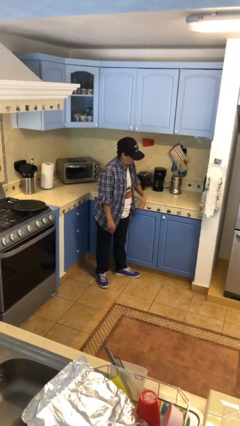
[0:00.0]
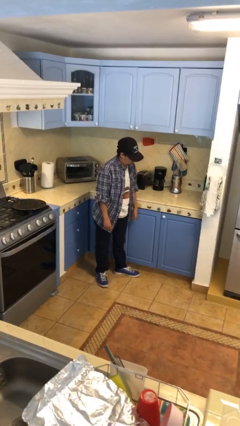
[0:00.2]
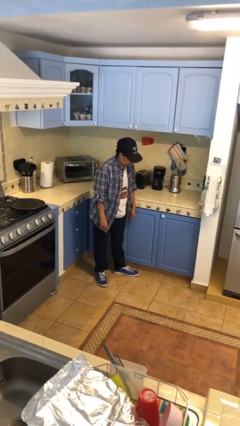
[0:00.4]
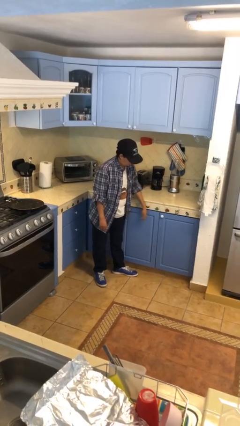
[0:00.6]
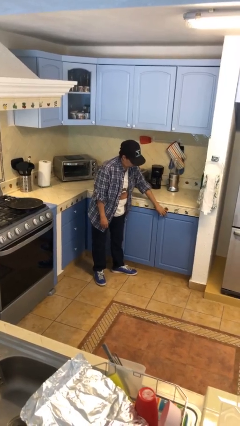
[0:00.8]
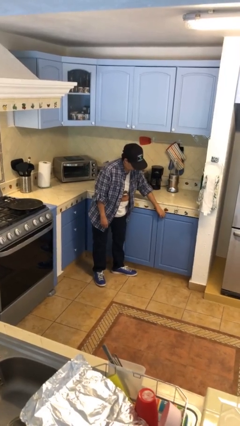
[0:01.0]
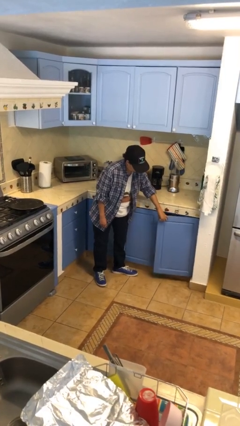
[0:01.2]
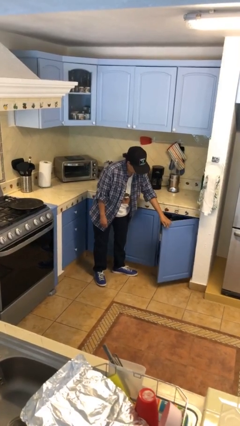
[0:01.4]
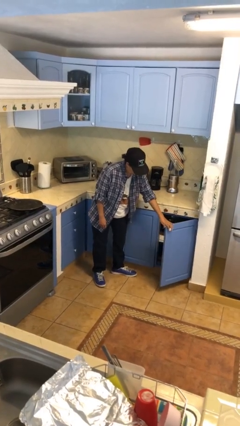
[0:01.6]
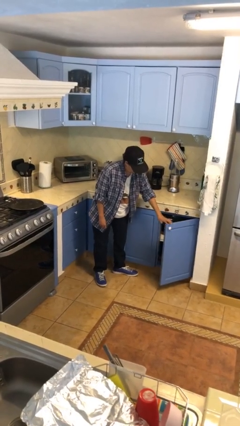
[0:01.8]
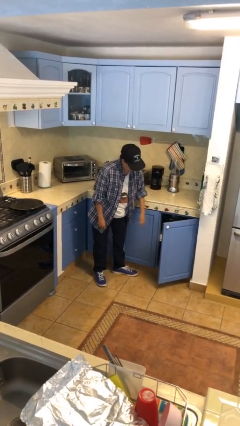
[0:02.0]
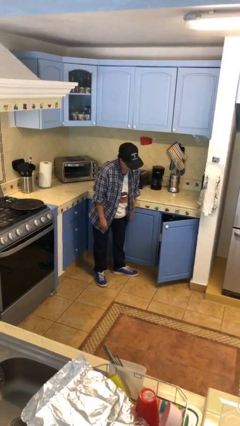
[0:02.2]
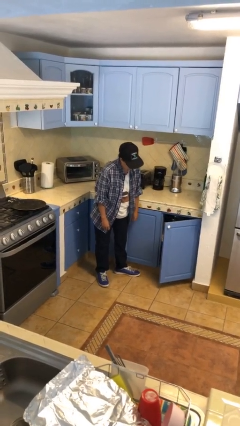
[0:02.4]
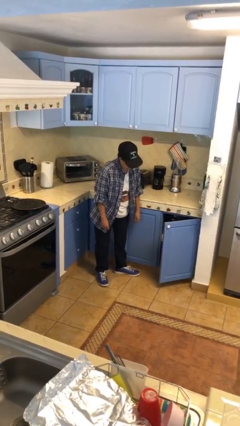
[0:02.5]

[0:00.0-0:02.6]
person opens cabinet

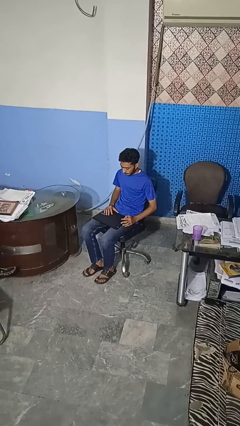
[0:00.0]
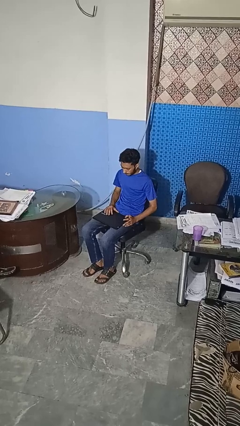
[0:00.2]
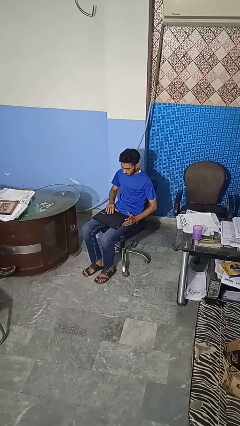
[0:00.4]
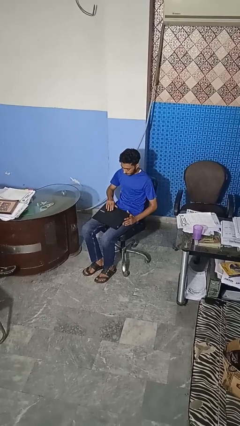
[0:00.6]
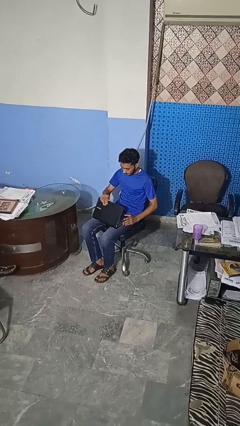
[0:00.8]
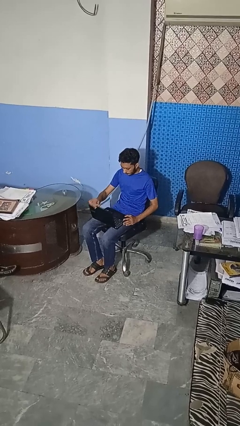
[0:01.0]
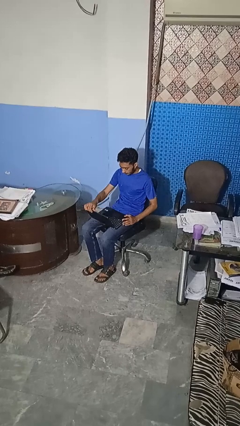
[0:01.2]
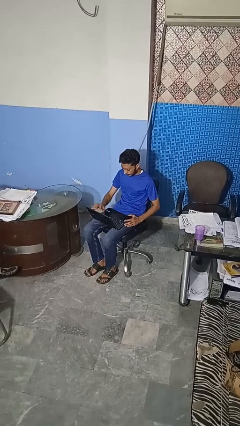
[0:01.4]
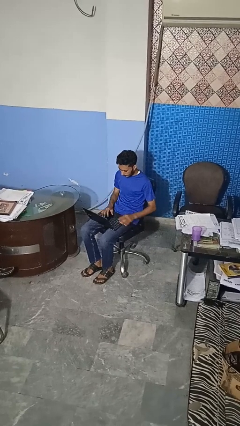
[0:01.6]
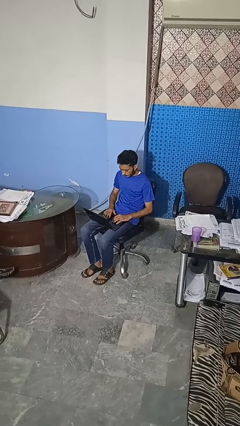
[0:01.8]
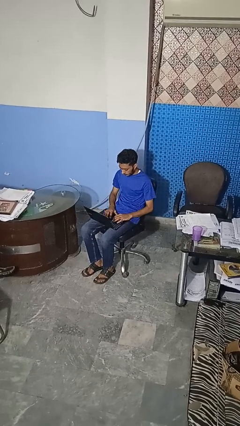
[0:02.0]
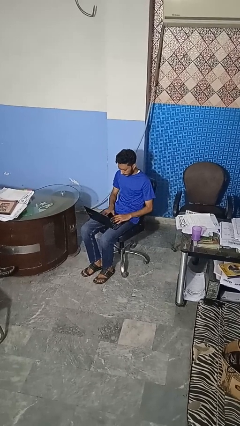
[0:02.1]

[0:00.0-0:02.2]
person opens laptop

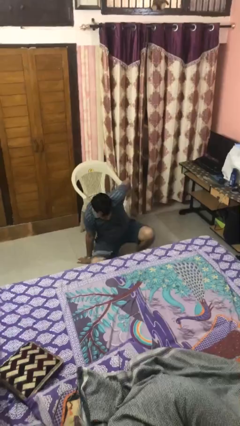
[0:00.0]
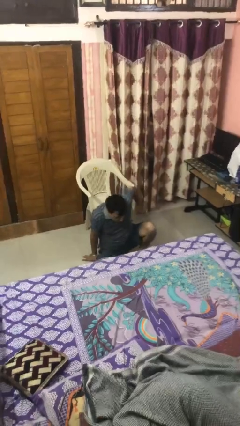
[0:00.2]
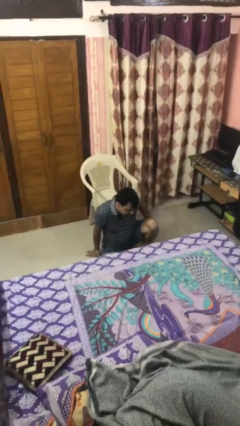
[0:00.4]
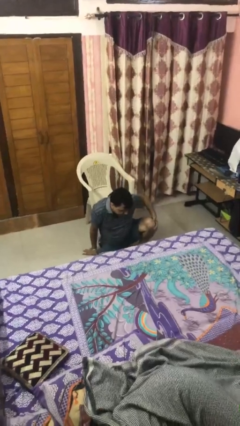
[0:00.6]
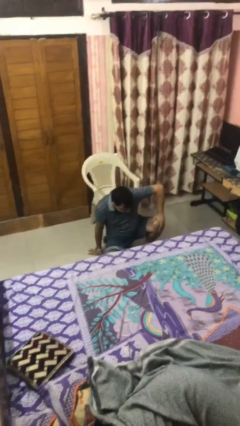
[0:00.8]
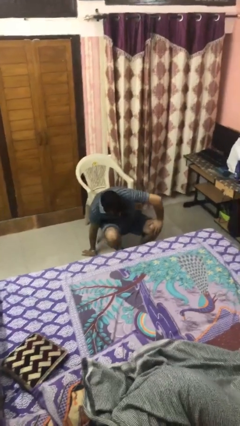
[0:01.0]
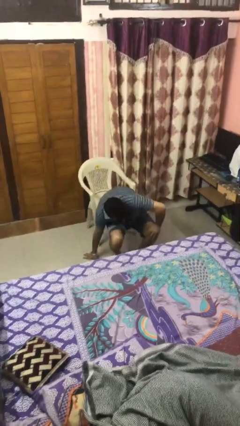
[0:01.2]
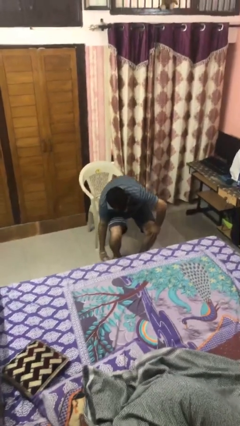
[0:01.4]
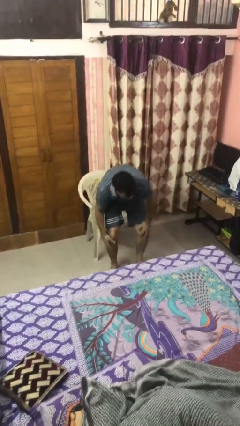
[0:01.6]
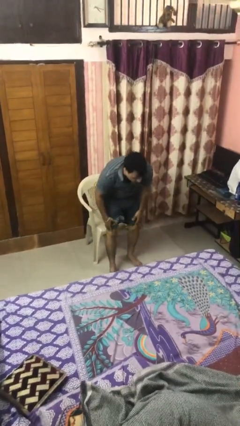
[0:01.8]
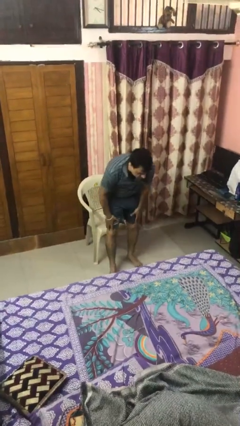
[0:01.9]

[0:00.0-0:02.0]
person stands up from floor

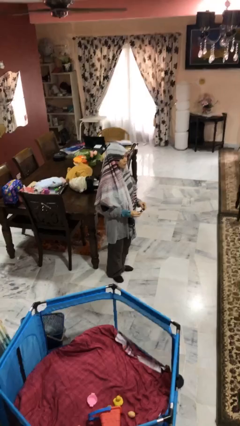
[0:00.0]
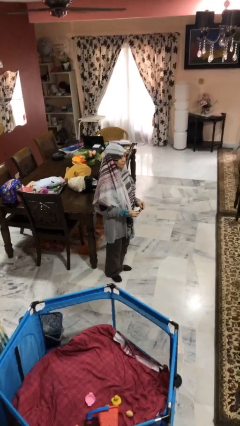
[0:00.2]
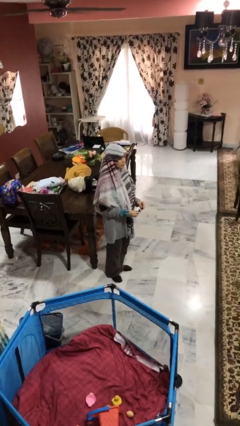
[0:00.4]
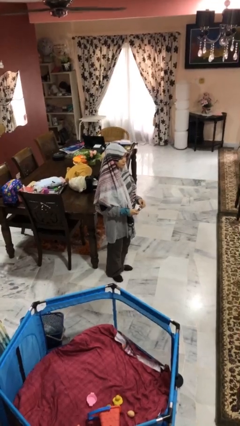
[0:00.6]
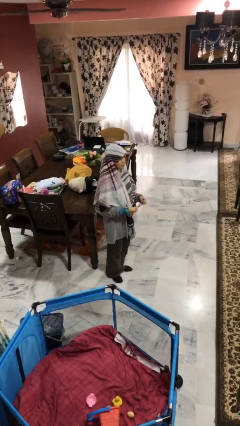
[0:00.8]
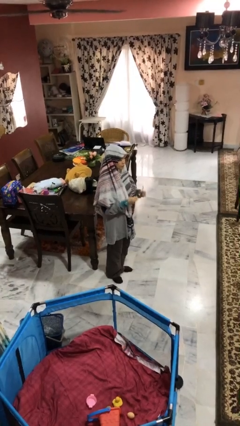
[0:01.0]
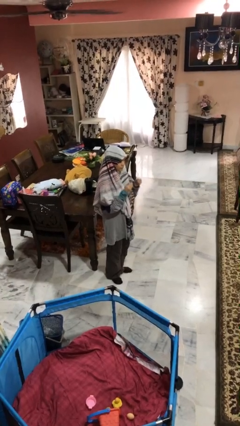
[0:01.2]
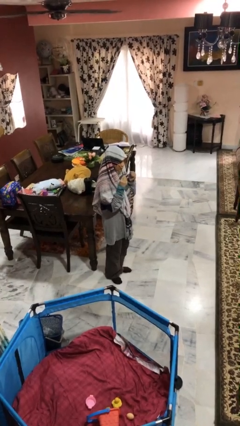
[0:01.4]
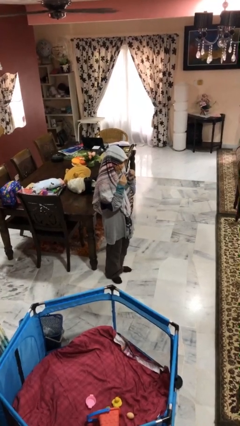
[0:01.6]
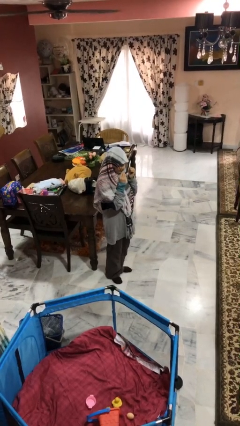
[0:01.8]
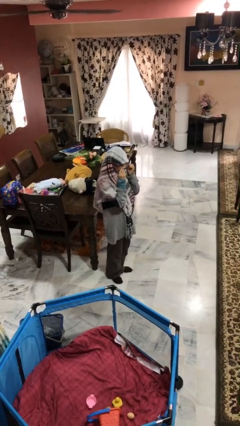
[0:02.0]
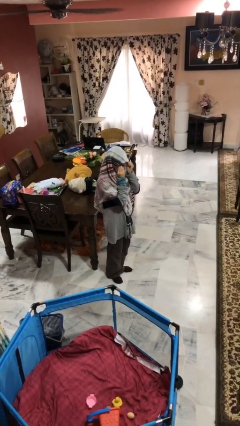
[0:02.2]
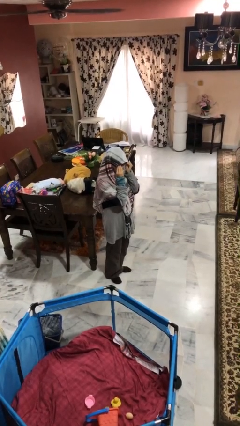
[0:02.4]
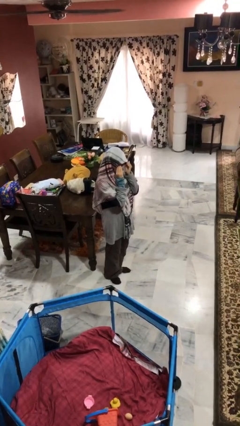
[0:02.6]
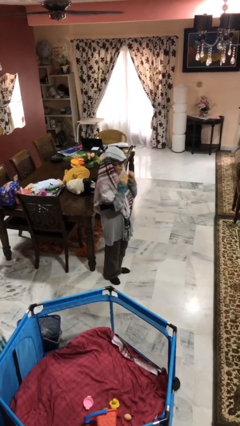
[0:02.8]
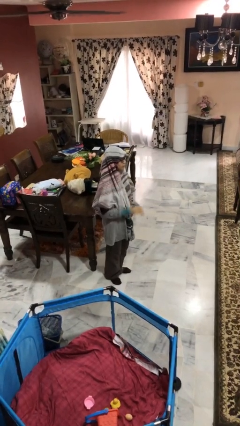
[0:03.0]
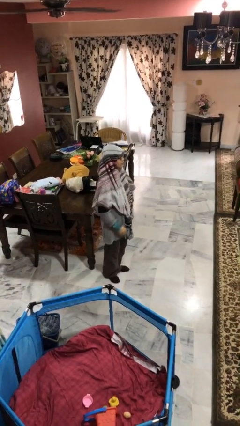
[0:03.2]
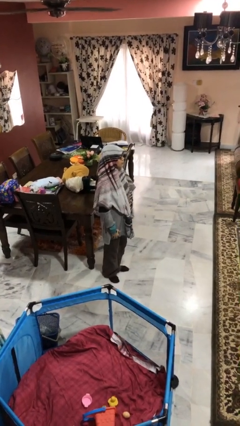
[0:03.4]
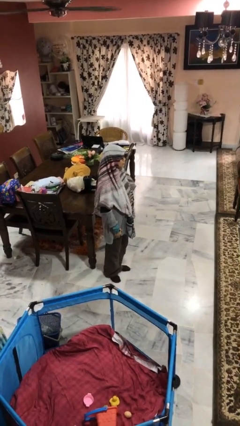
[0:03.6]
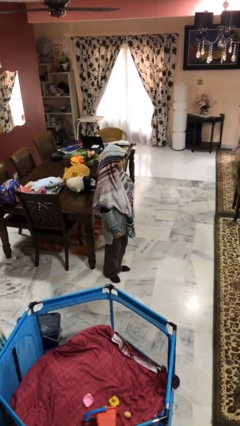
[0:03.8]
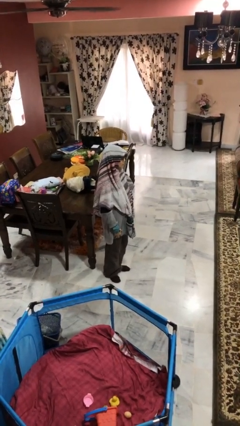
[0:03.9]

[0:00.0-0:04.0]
person puts on glasses

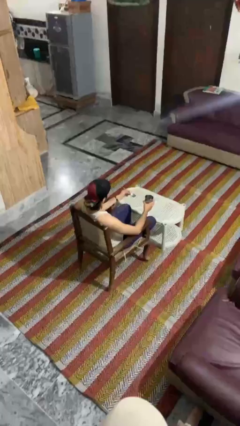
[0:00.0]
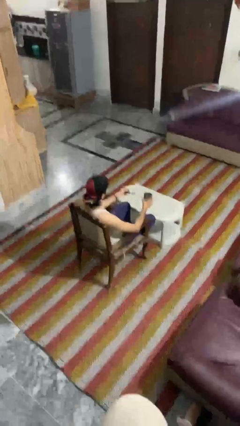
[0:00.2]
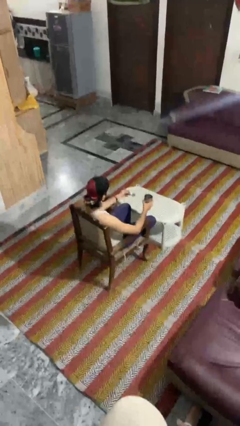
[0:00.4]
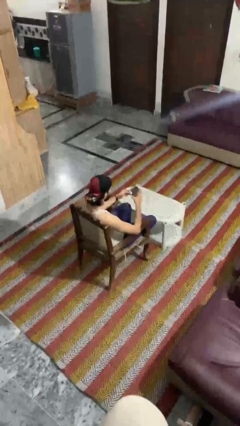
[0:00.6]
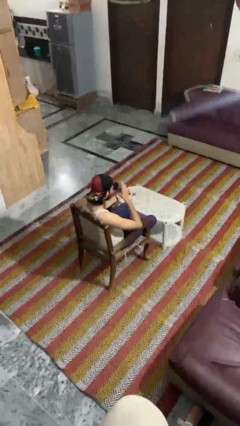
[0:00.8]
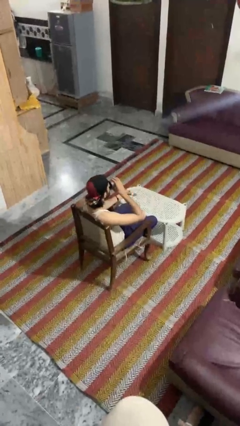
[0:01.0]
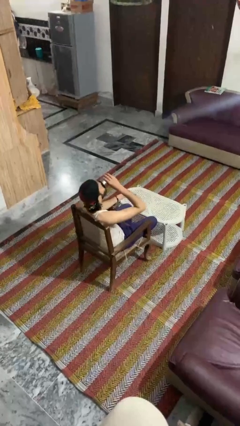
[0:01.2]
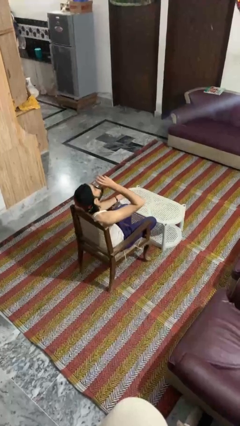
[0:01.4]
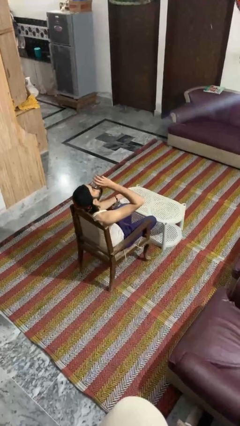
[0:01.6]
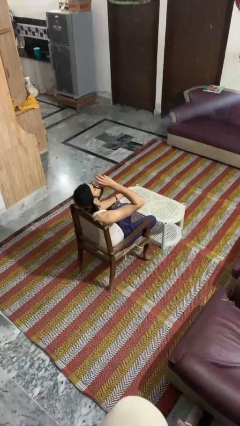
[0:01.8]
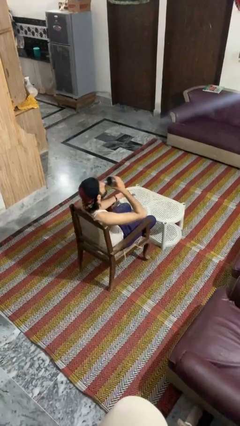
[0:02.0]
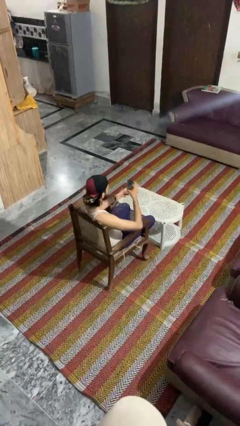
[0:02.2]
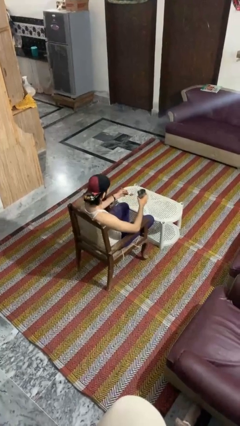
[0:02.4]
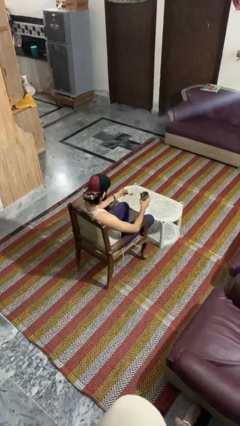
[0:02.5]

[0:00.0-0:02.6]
person drinks from mug

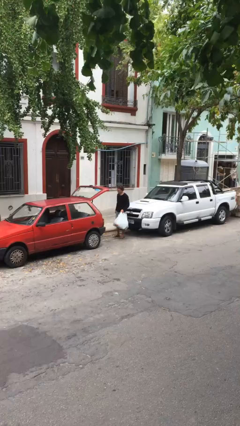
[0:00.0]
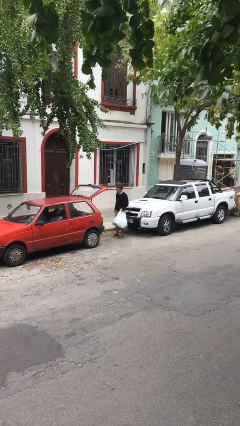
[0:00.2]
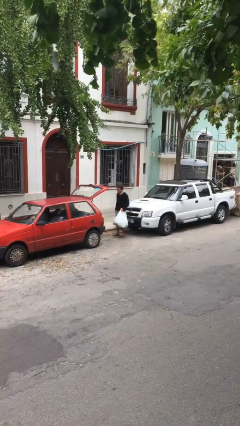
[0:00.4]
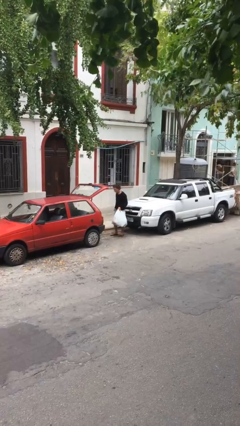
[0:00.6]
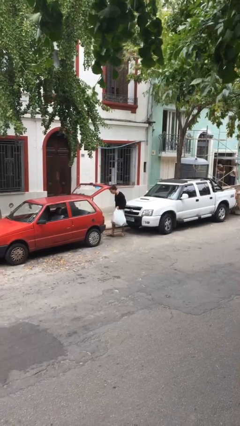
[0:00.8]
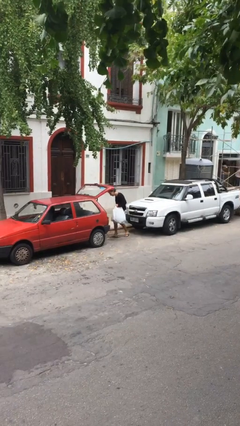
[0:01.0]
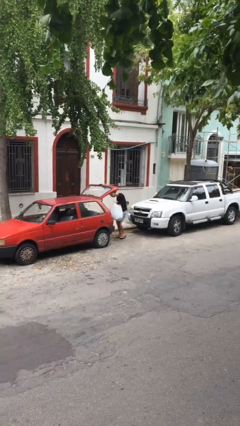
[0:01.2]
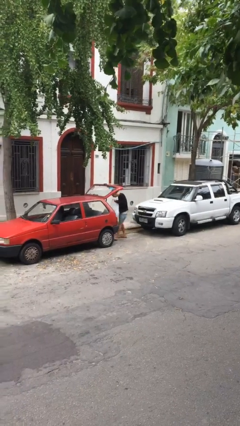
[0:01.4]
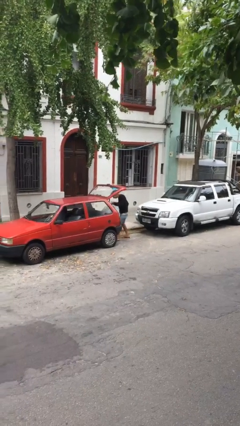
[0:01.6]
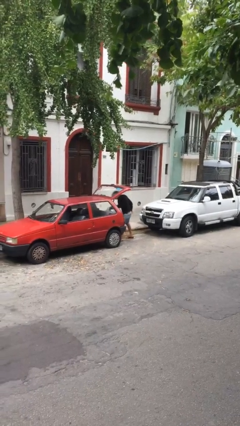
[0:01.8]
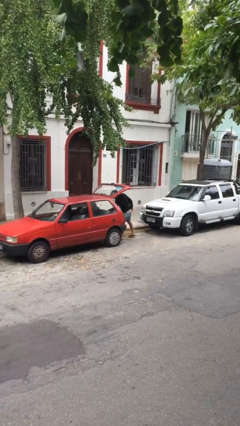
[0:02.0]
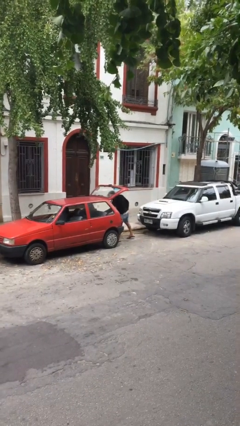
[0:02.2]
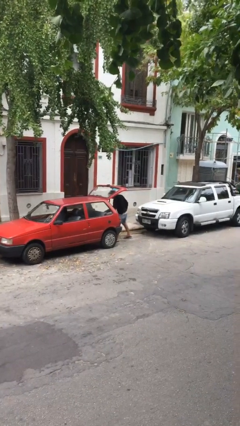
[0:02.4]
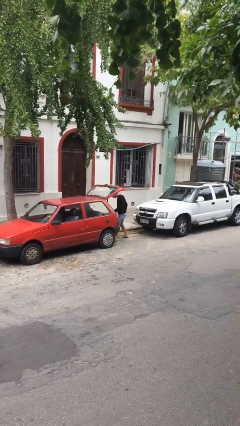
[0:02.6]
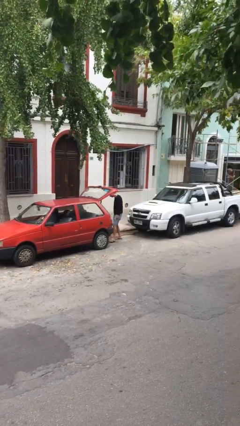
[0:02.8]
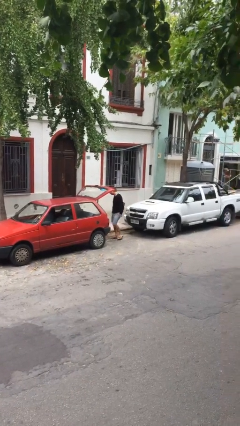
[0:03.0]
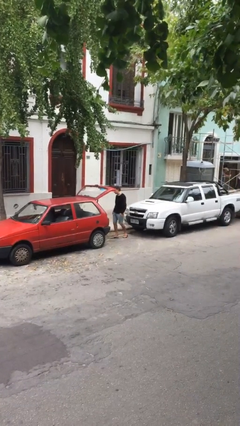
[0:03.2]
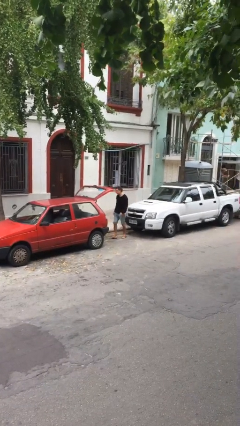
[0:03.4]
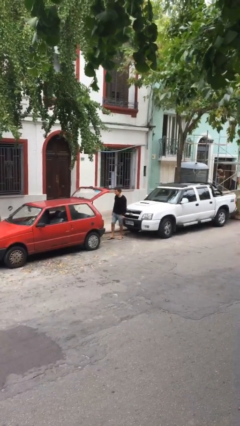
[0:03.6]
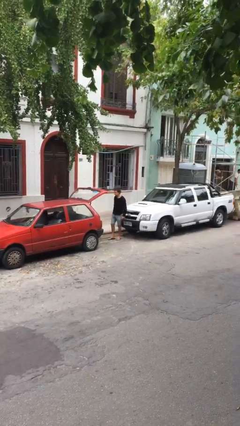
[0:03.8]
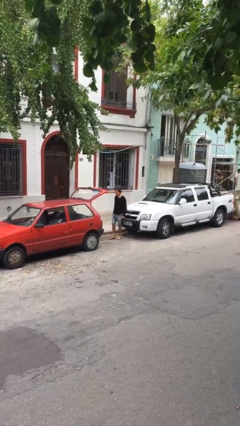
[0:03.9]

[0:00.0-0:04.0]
person loads car
